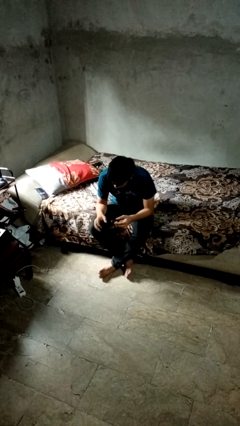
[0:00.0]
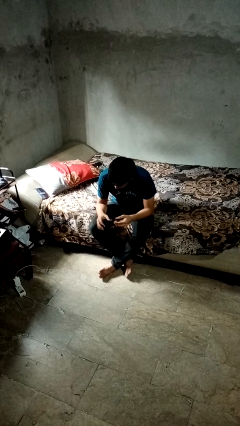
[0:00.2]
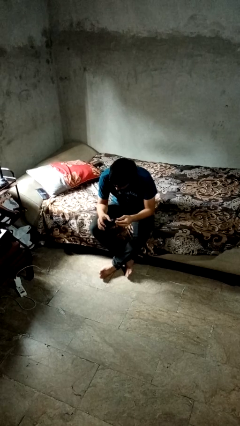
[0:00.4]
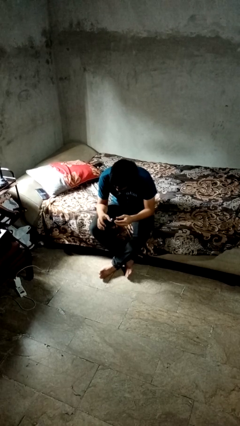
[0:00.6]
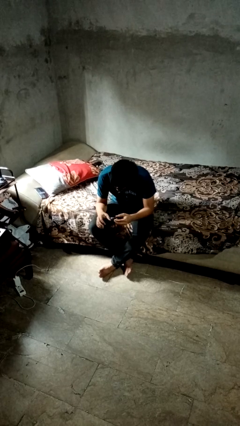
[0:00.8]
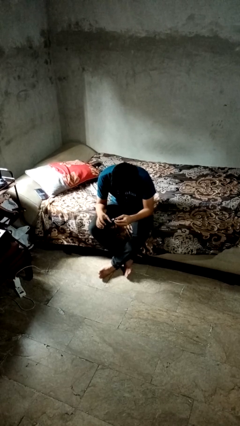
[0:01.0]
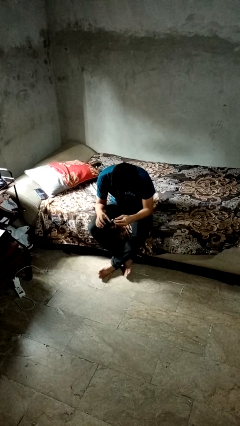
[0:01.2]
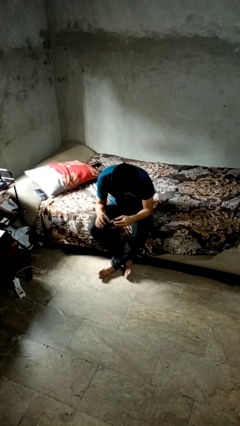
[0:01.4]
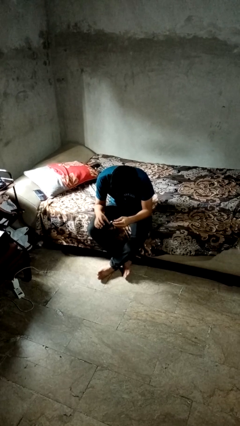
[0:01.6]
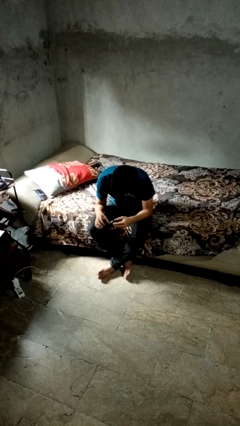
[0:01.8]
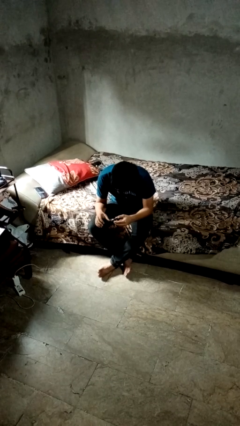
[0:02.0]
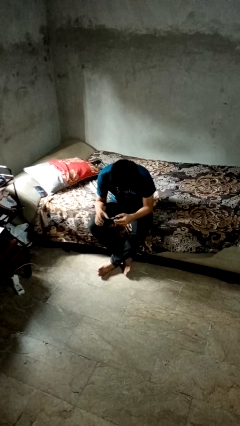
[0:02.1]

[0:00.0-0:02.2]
person clips fingernails

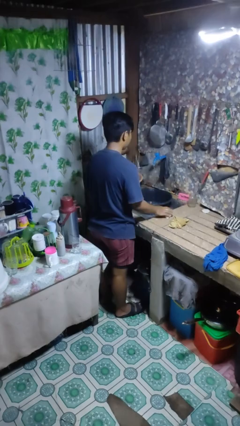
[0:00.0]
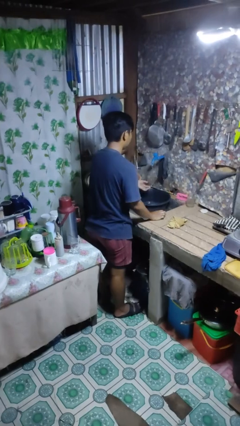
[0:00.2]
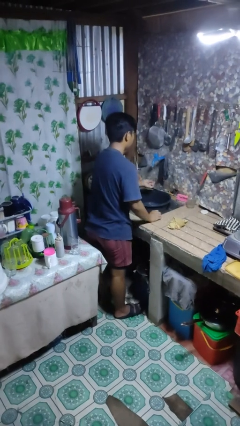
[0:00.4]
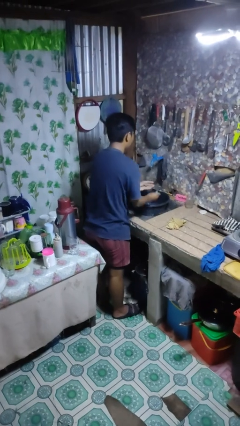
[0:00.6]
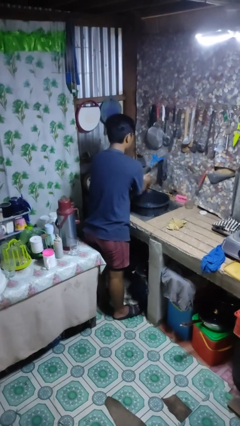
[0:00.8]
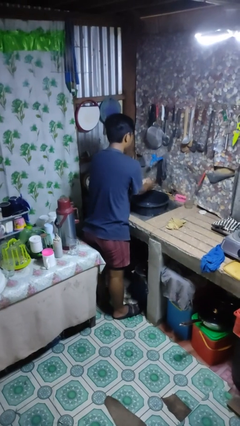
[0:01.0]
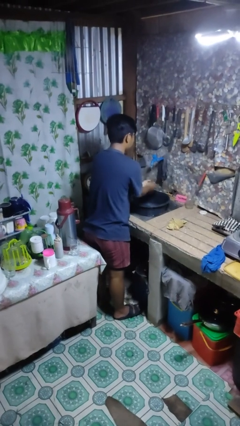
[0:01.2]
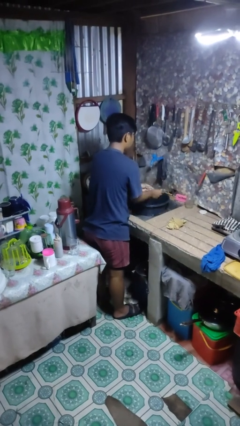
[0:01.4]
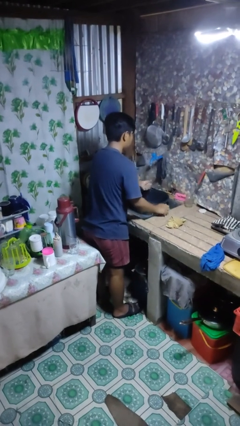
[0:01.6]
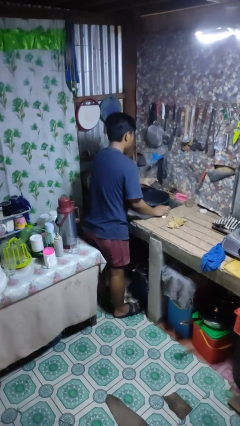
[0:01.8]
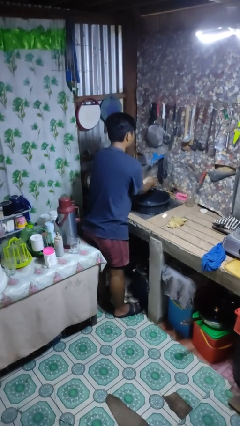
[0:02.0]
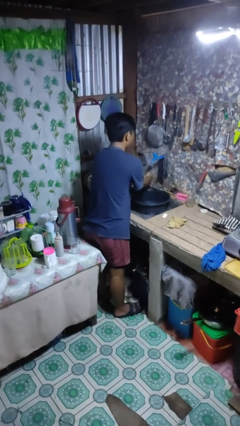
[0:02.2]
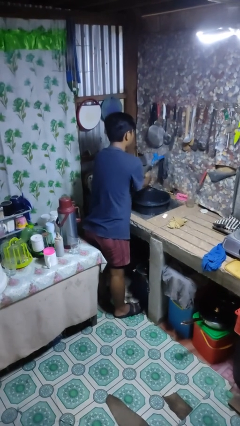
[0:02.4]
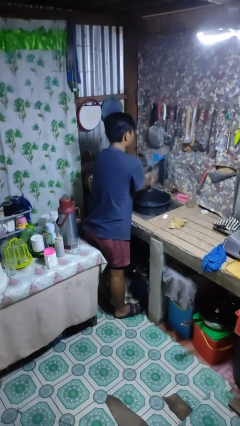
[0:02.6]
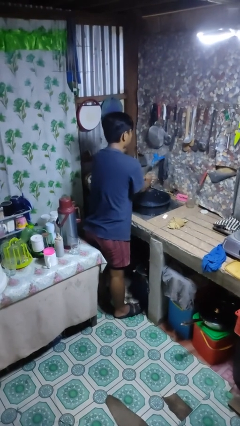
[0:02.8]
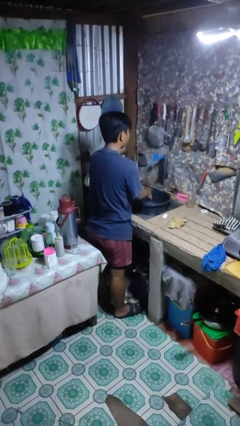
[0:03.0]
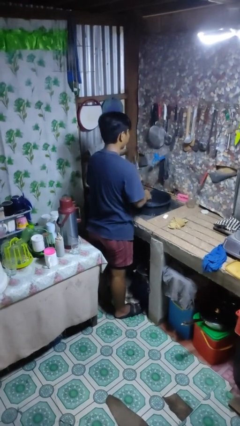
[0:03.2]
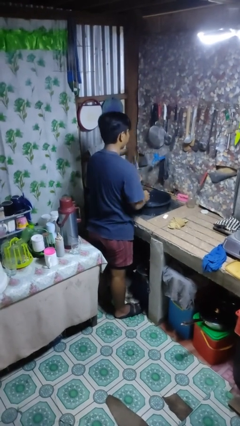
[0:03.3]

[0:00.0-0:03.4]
person washes hands

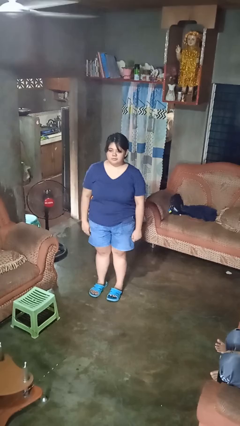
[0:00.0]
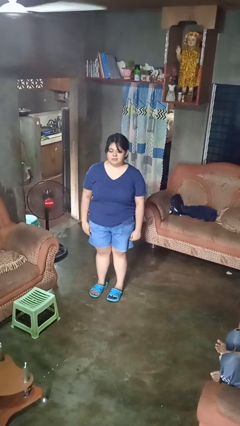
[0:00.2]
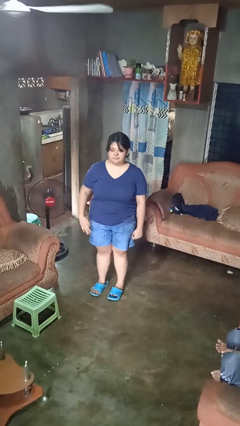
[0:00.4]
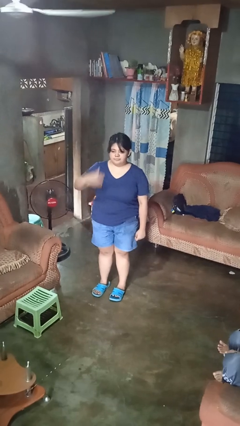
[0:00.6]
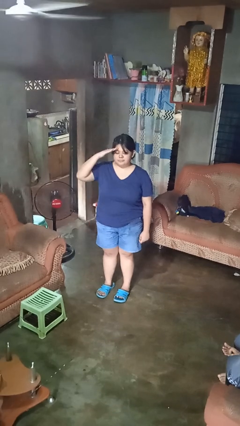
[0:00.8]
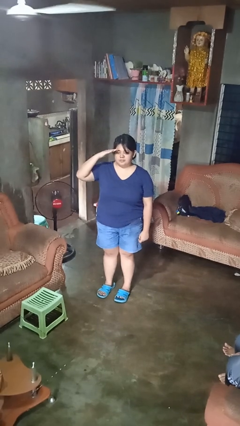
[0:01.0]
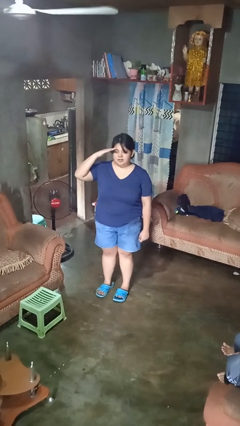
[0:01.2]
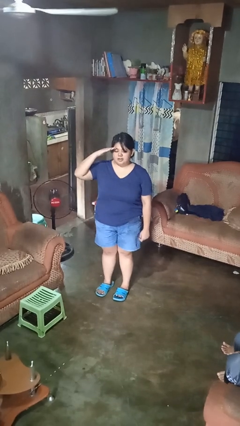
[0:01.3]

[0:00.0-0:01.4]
person salutes

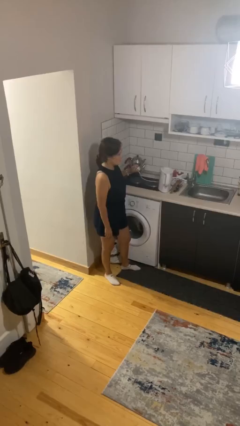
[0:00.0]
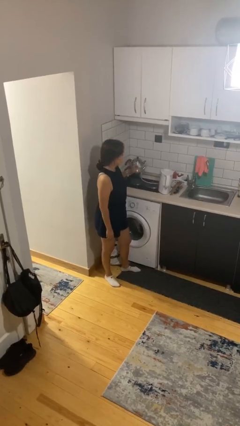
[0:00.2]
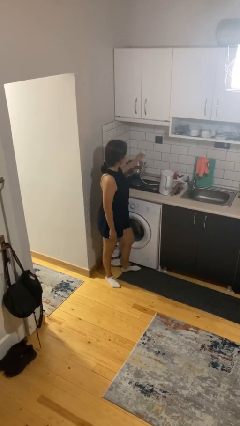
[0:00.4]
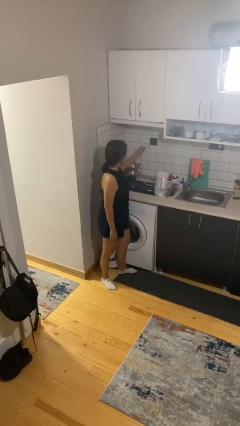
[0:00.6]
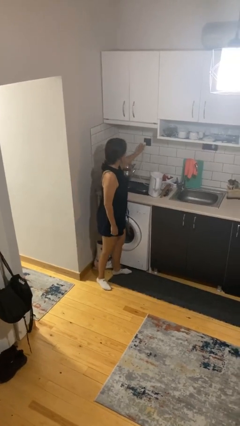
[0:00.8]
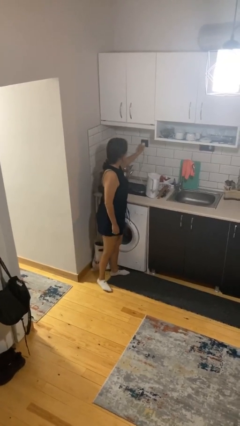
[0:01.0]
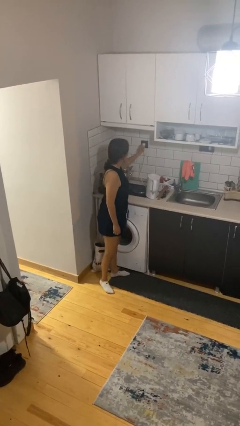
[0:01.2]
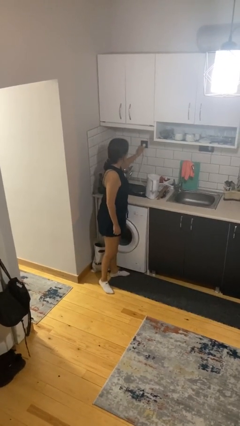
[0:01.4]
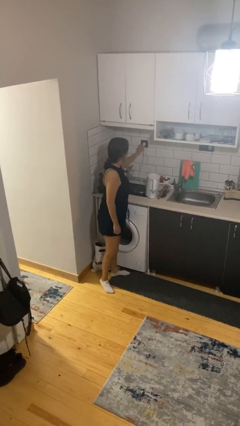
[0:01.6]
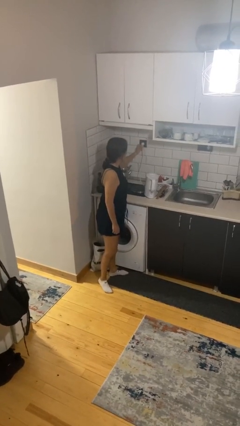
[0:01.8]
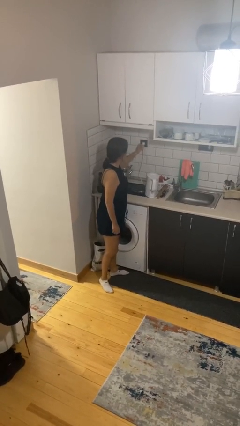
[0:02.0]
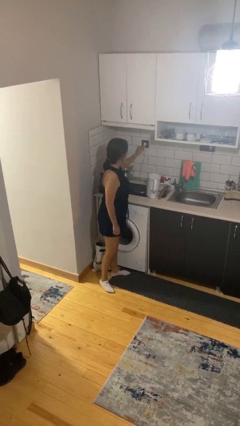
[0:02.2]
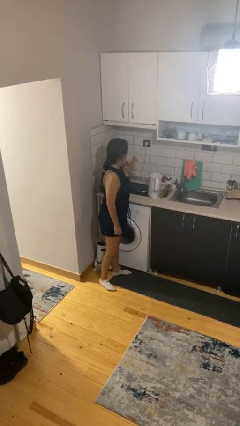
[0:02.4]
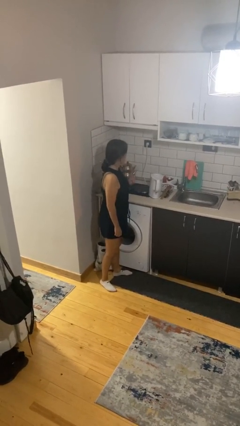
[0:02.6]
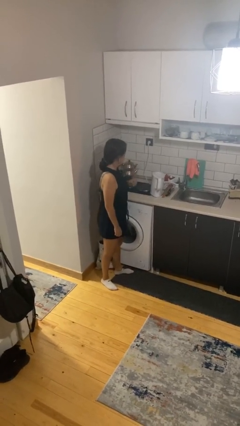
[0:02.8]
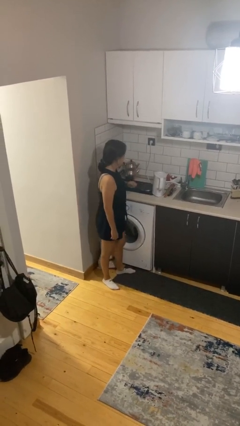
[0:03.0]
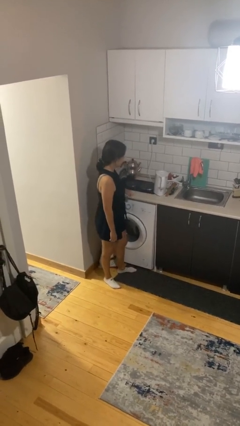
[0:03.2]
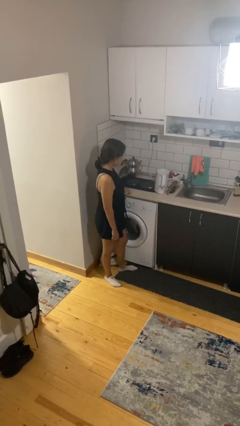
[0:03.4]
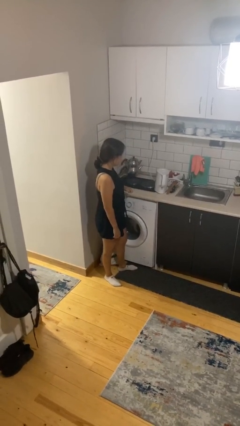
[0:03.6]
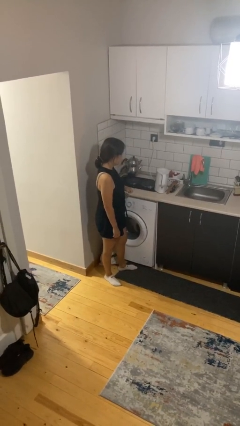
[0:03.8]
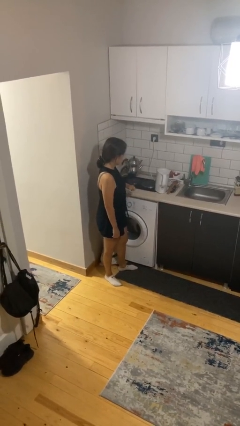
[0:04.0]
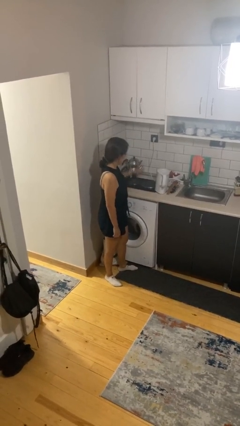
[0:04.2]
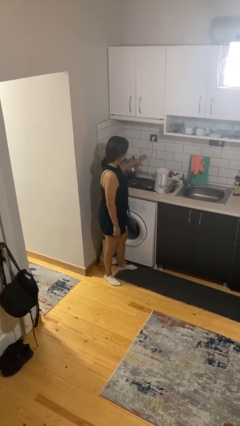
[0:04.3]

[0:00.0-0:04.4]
person plugs into electrical socket

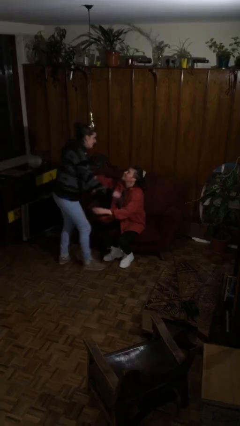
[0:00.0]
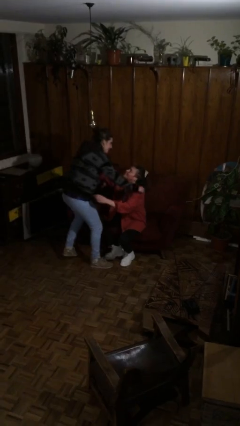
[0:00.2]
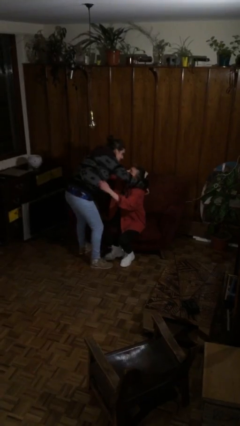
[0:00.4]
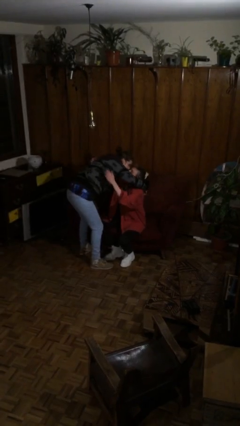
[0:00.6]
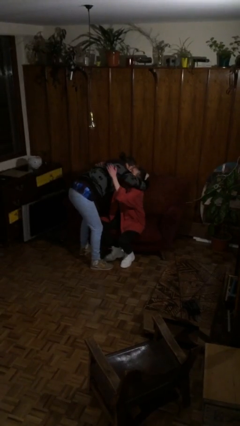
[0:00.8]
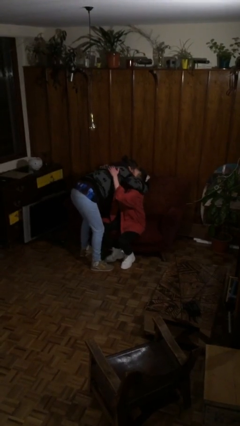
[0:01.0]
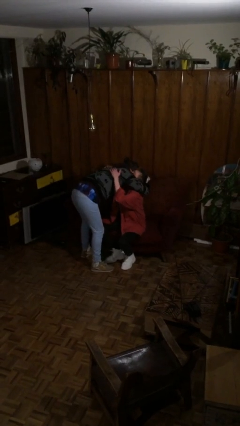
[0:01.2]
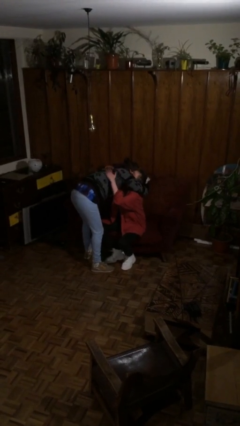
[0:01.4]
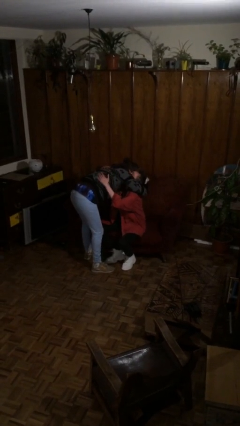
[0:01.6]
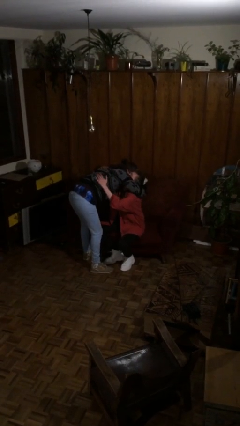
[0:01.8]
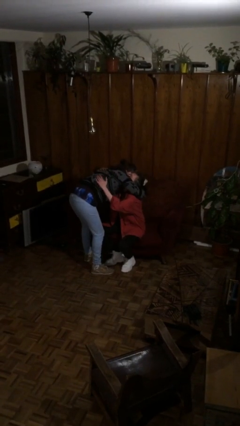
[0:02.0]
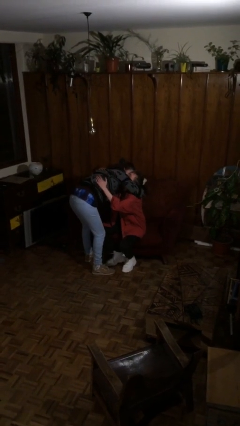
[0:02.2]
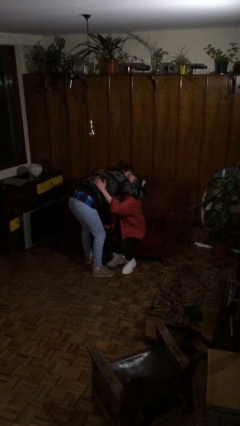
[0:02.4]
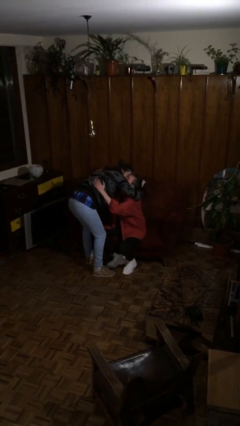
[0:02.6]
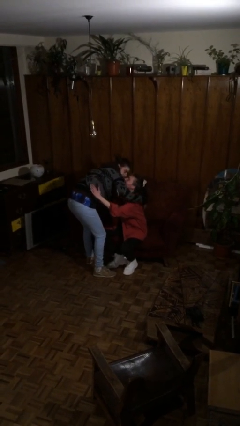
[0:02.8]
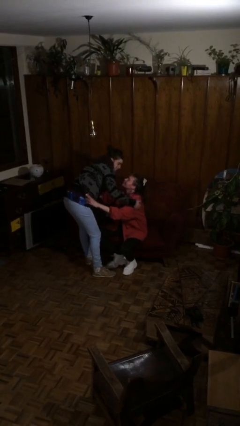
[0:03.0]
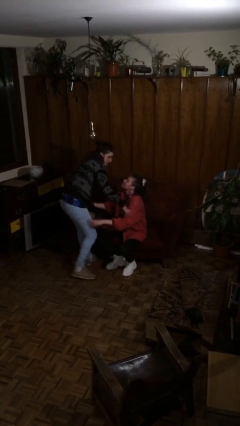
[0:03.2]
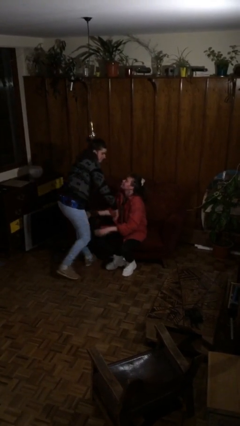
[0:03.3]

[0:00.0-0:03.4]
person embraces person

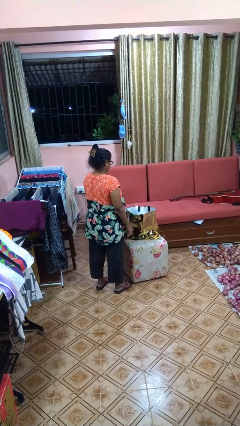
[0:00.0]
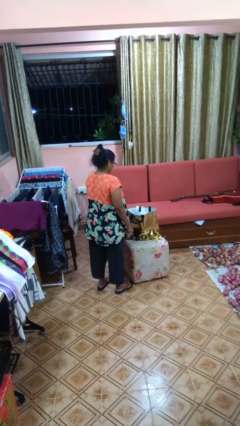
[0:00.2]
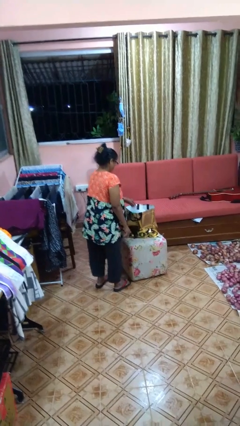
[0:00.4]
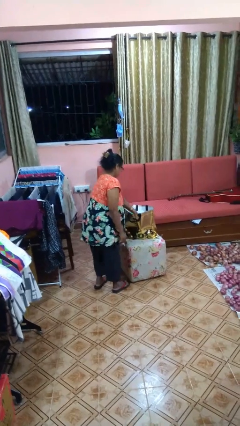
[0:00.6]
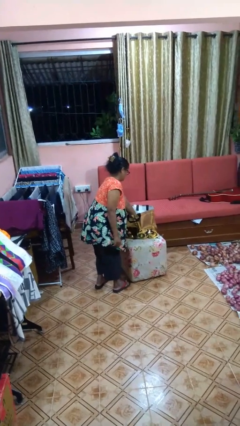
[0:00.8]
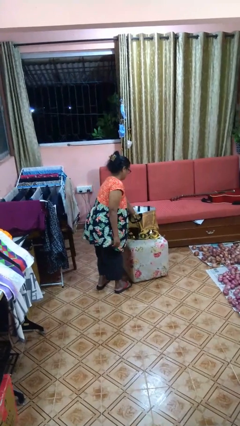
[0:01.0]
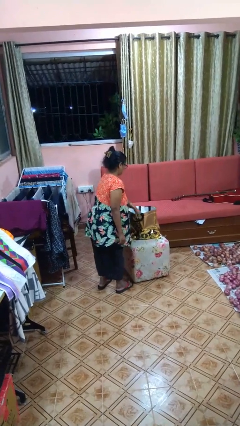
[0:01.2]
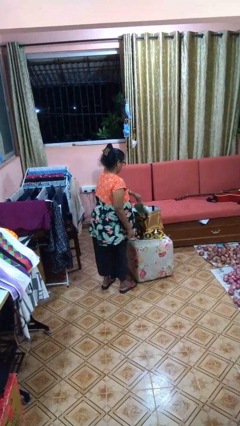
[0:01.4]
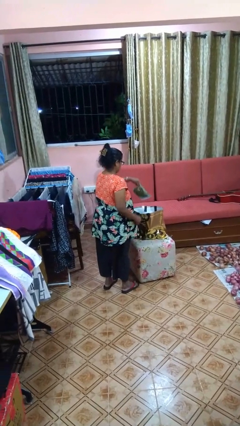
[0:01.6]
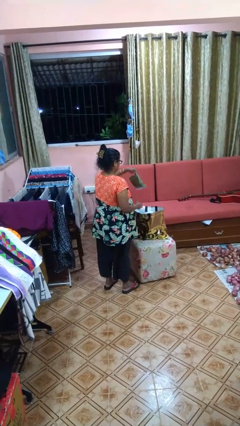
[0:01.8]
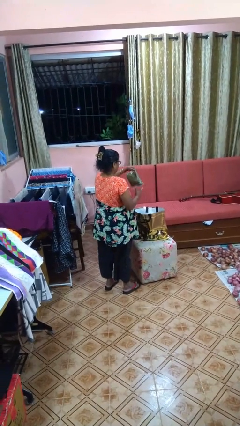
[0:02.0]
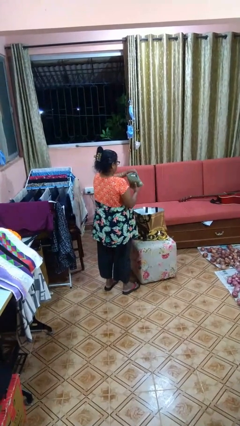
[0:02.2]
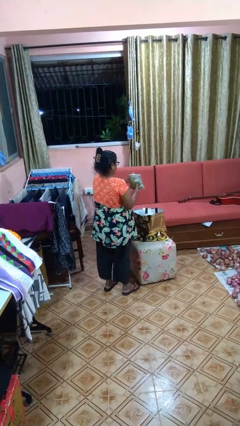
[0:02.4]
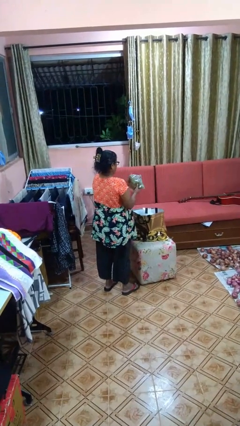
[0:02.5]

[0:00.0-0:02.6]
person takes object from bag
